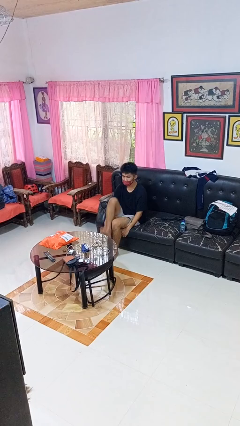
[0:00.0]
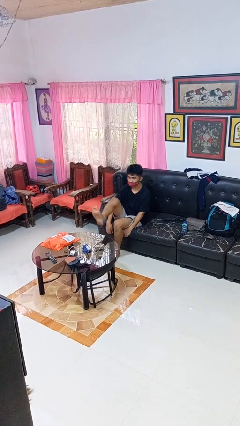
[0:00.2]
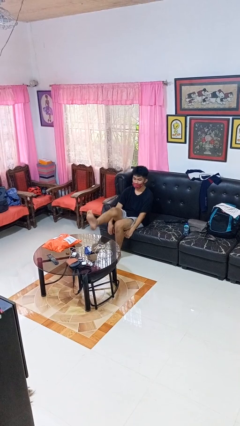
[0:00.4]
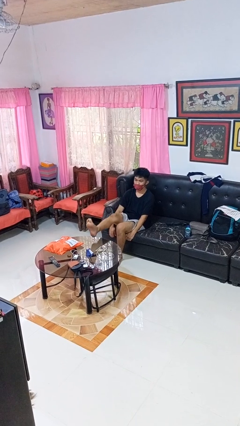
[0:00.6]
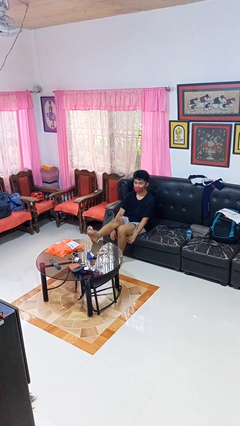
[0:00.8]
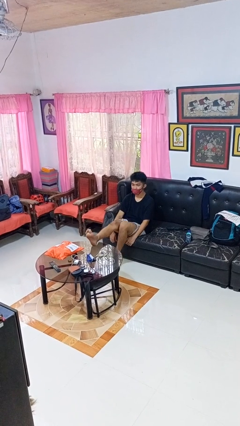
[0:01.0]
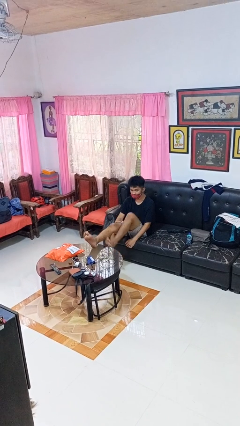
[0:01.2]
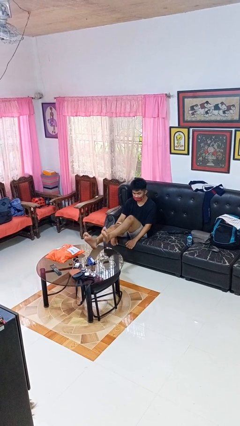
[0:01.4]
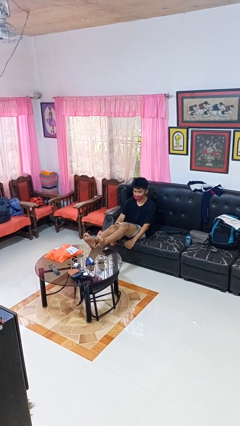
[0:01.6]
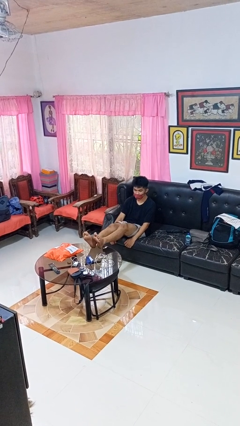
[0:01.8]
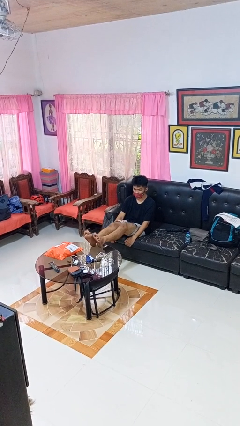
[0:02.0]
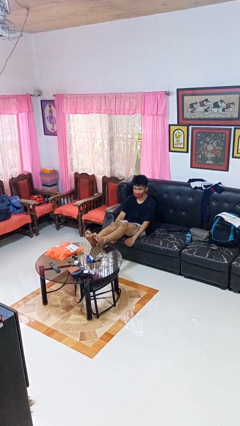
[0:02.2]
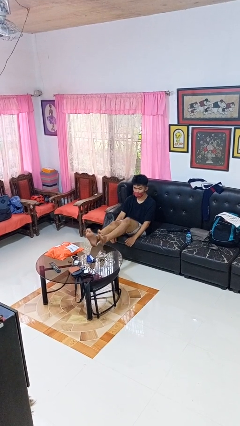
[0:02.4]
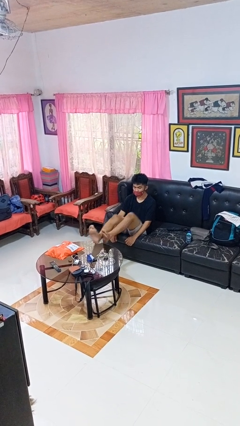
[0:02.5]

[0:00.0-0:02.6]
person puts feet up

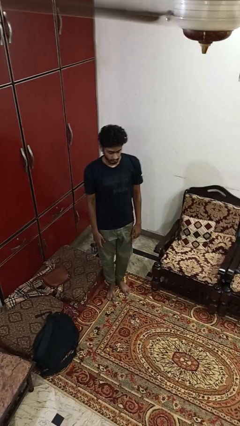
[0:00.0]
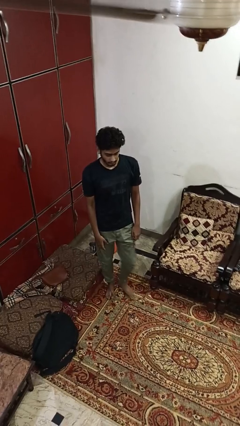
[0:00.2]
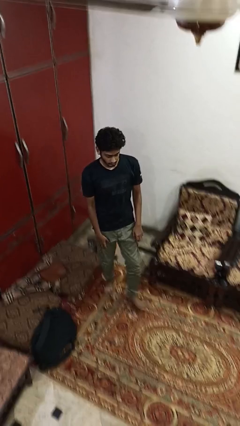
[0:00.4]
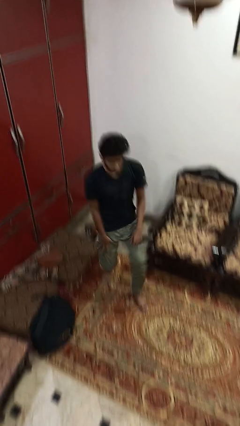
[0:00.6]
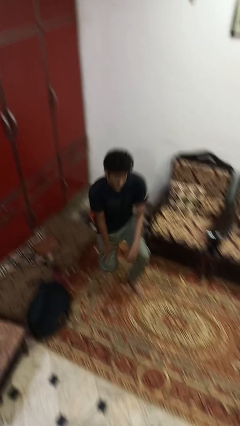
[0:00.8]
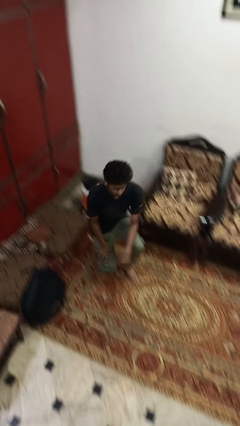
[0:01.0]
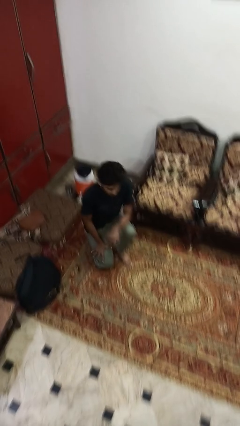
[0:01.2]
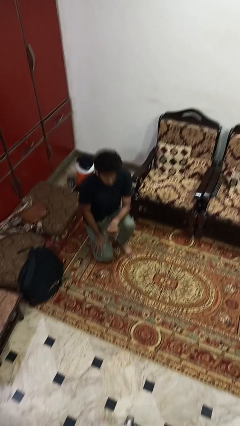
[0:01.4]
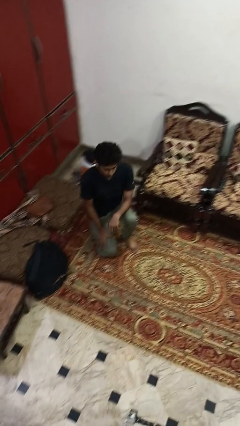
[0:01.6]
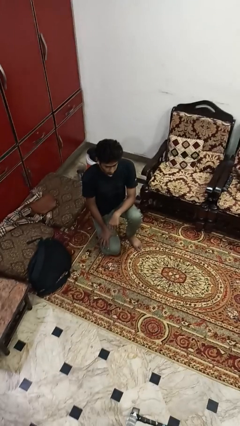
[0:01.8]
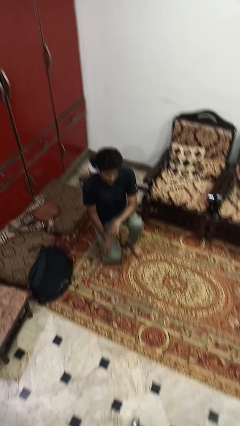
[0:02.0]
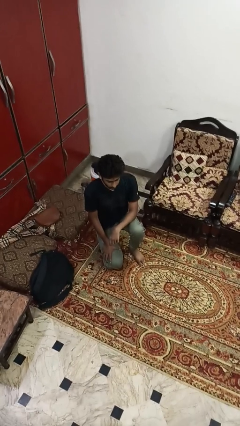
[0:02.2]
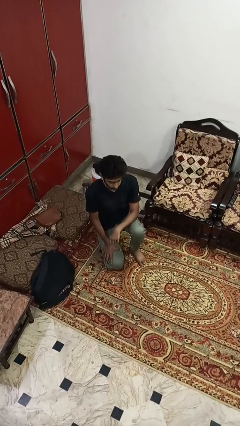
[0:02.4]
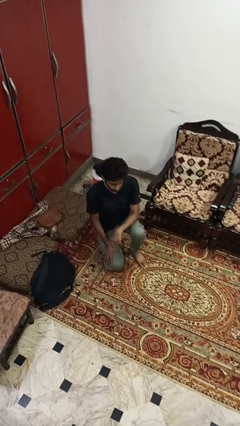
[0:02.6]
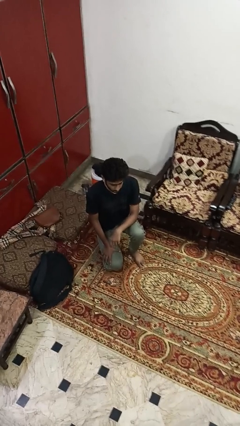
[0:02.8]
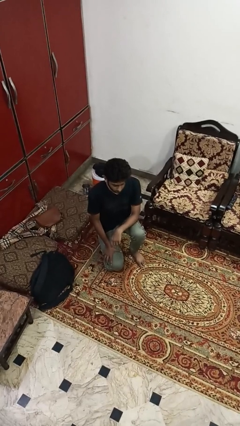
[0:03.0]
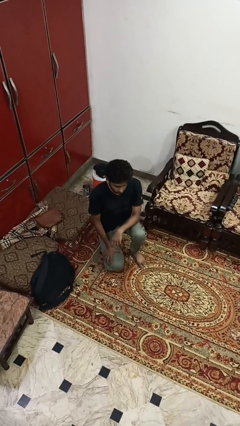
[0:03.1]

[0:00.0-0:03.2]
person kneels

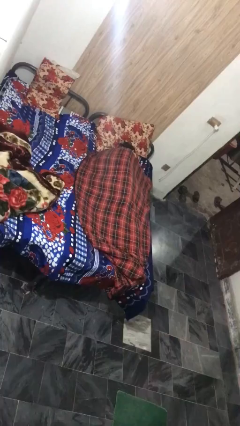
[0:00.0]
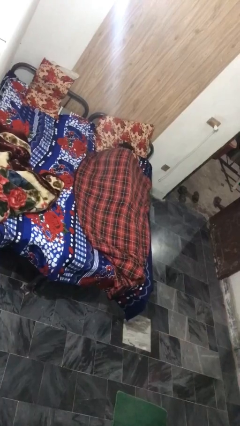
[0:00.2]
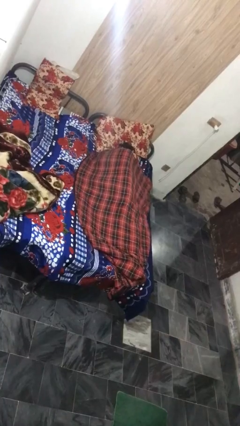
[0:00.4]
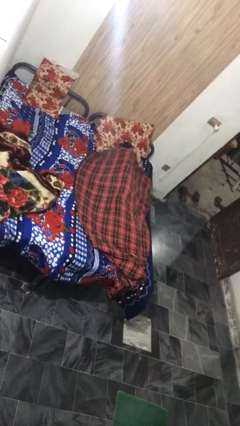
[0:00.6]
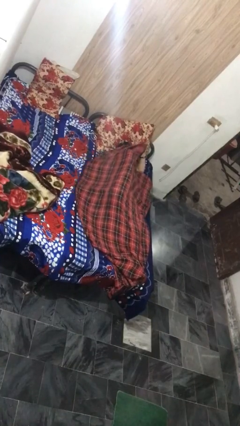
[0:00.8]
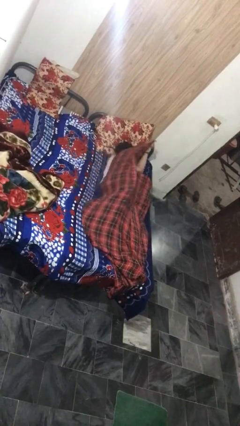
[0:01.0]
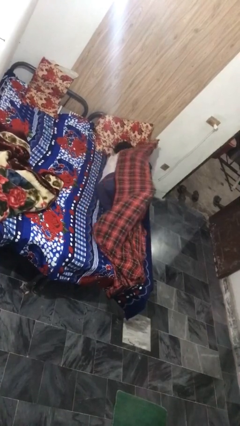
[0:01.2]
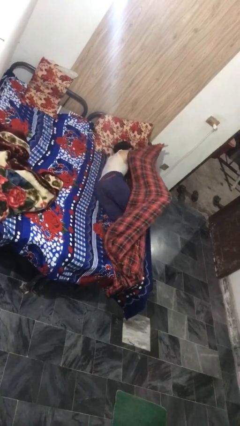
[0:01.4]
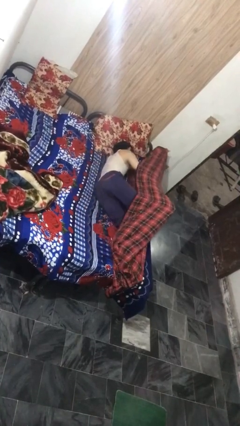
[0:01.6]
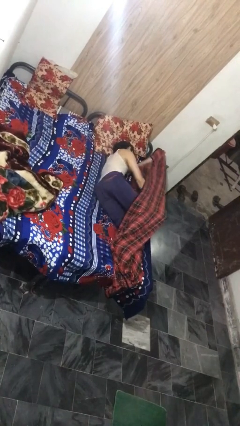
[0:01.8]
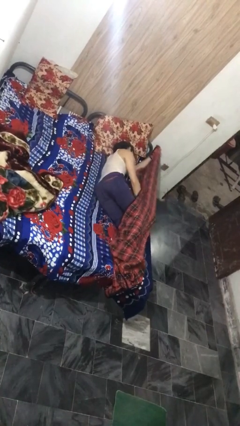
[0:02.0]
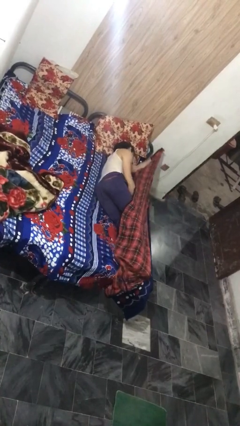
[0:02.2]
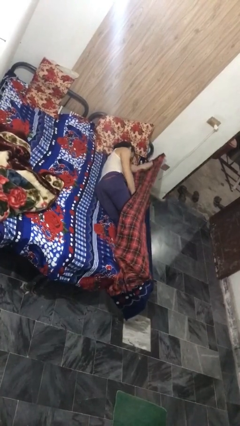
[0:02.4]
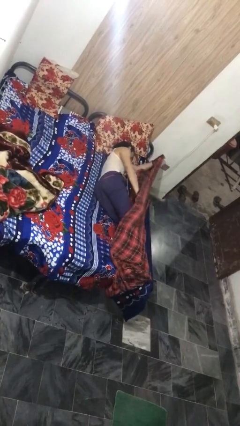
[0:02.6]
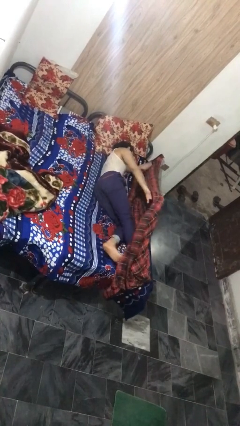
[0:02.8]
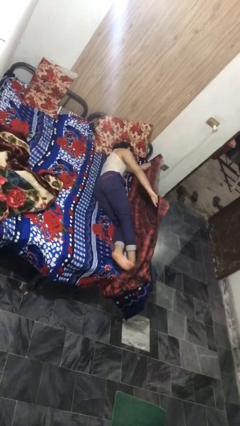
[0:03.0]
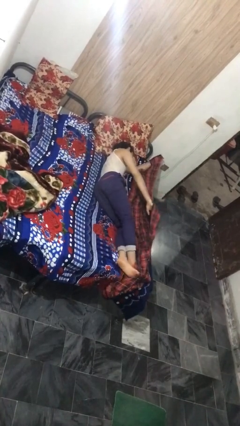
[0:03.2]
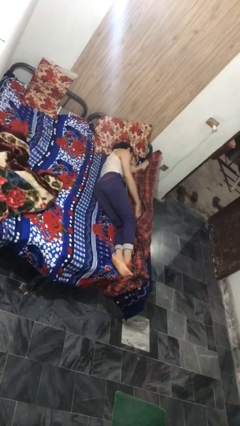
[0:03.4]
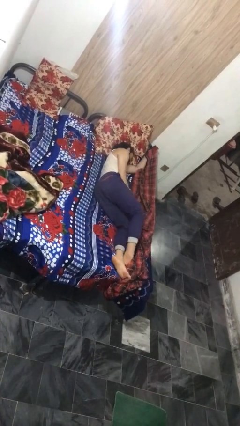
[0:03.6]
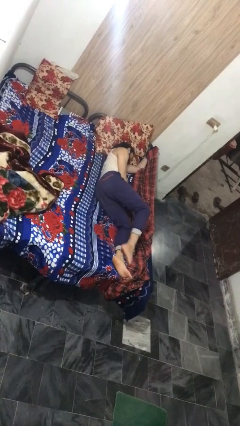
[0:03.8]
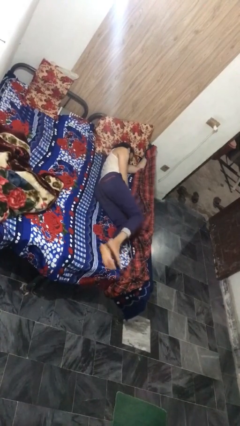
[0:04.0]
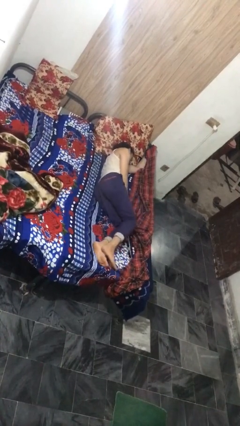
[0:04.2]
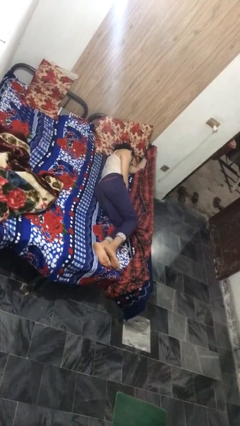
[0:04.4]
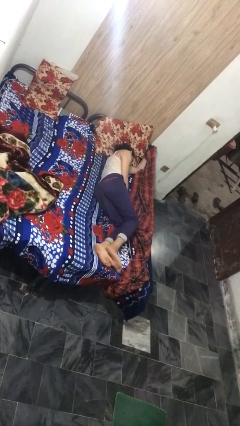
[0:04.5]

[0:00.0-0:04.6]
person uncovers with bedsheets

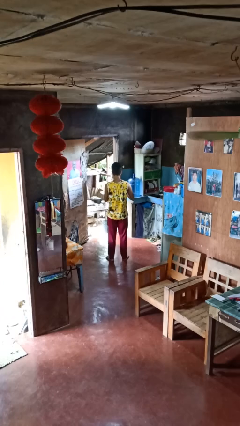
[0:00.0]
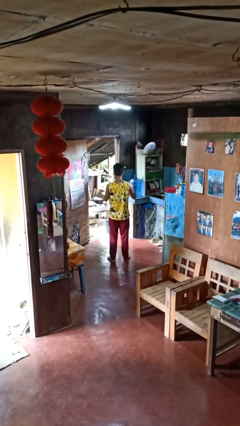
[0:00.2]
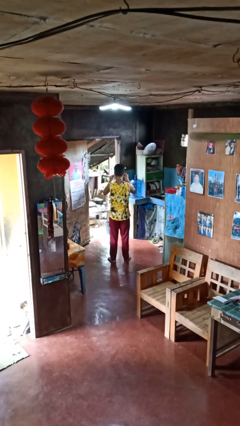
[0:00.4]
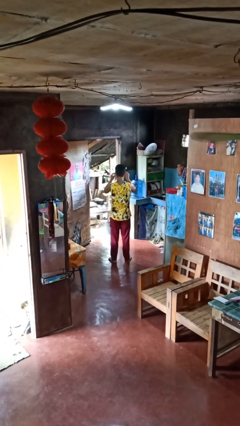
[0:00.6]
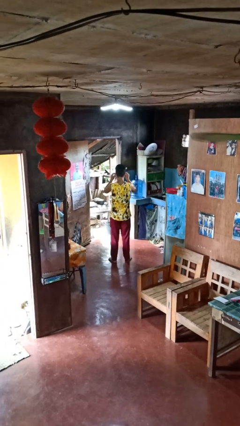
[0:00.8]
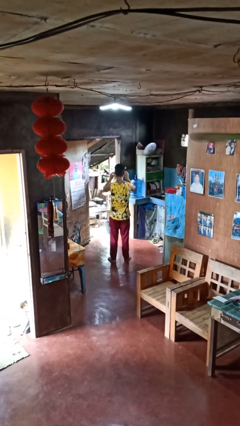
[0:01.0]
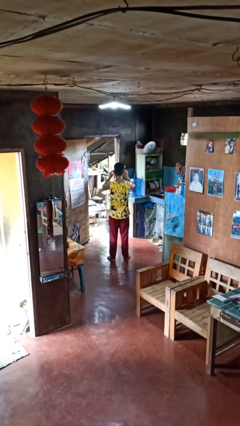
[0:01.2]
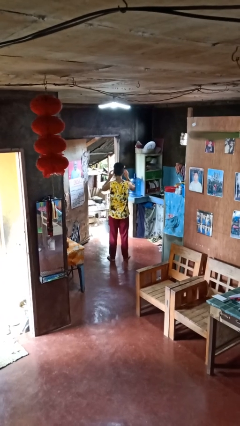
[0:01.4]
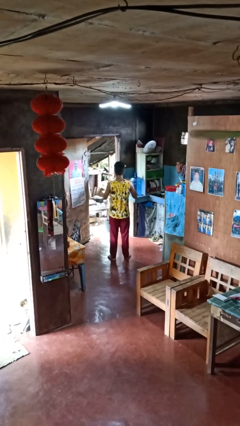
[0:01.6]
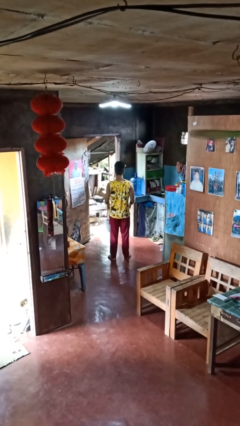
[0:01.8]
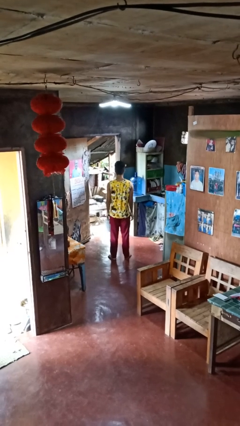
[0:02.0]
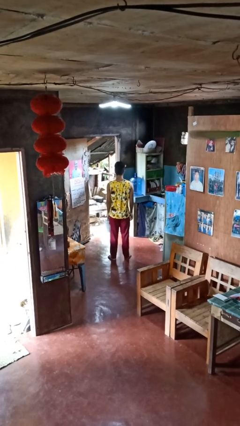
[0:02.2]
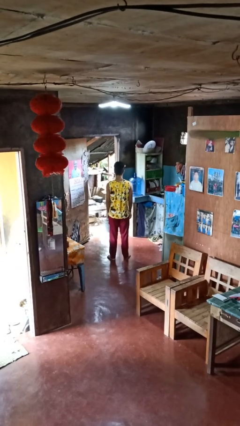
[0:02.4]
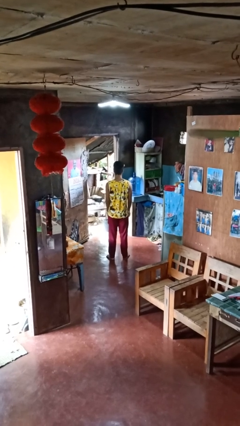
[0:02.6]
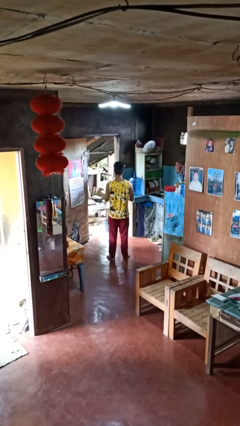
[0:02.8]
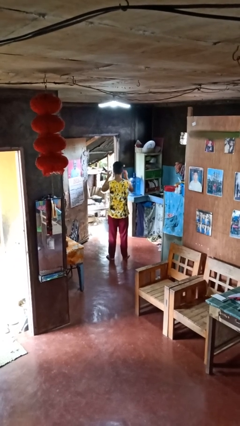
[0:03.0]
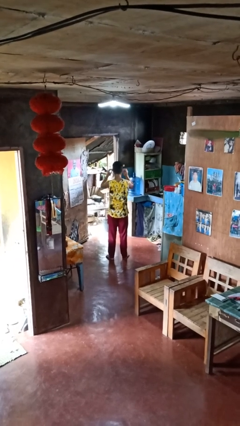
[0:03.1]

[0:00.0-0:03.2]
person puts on glasses

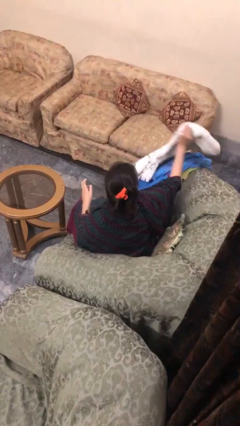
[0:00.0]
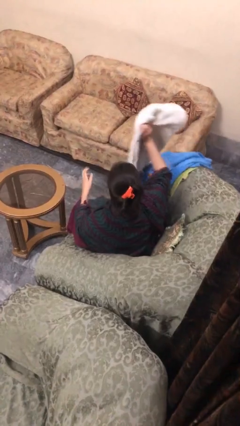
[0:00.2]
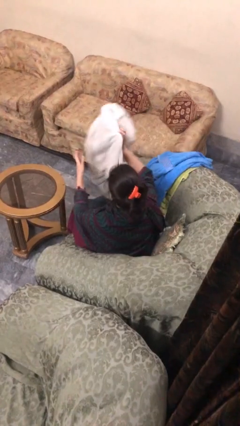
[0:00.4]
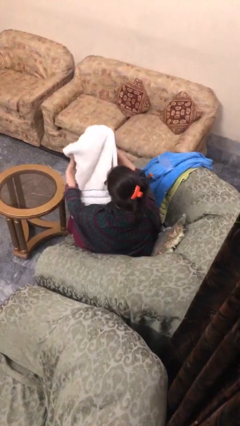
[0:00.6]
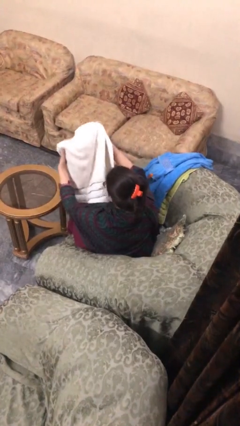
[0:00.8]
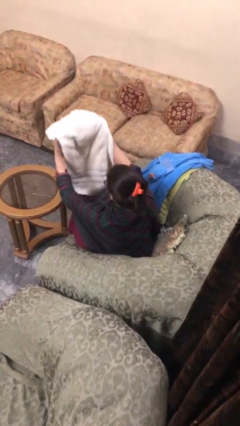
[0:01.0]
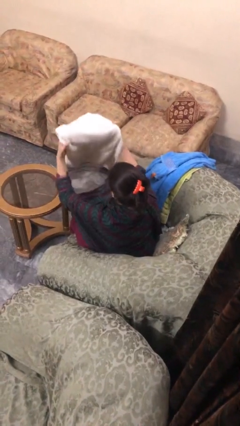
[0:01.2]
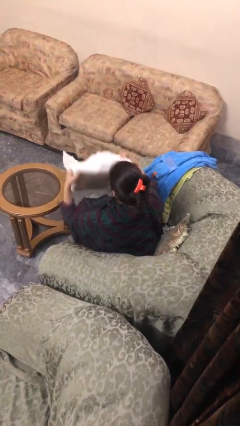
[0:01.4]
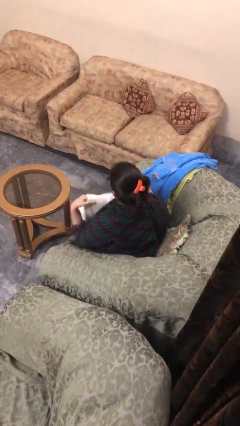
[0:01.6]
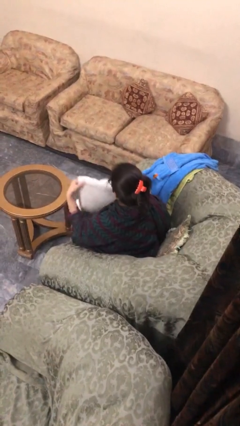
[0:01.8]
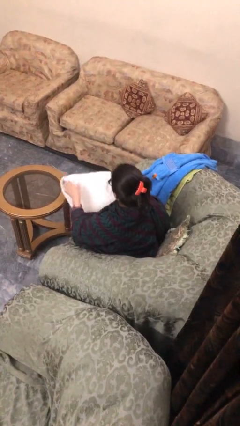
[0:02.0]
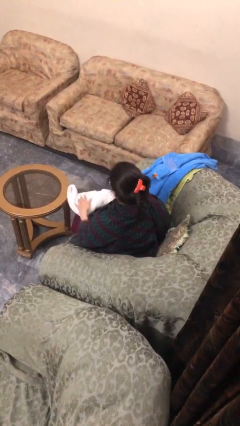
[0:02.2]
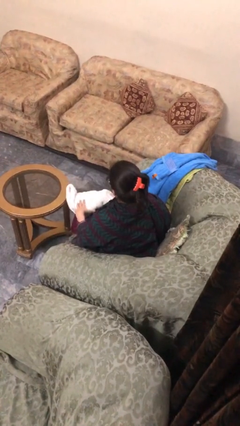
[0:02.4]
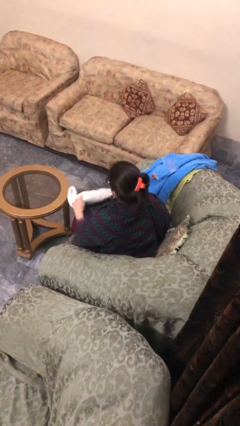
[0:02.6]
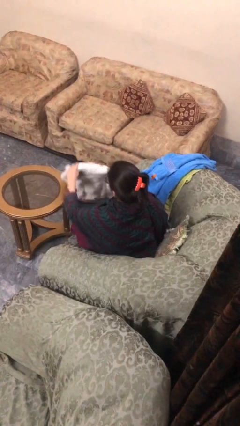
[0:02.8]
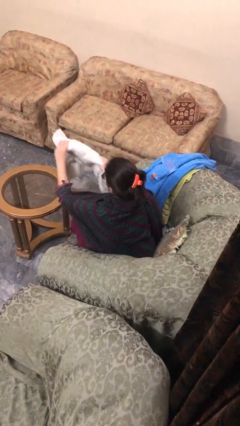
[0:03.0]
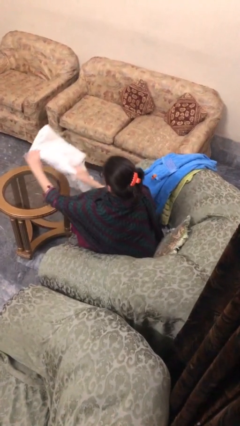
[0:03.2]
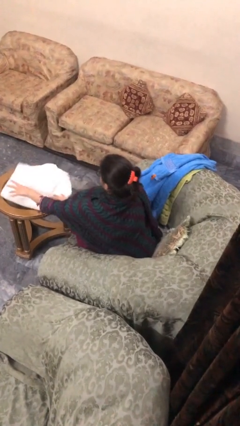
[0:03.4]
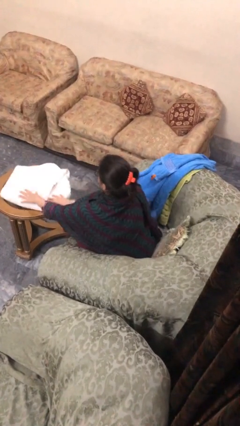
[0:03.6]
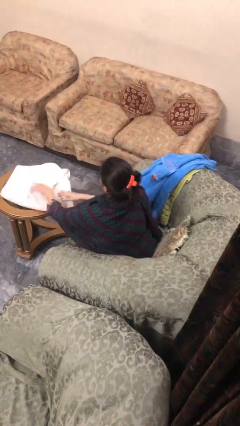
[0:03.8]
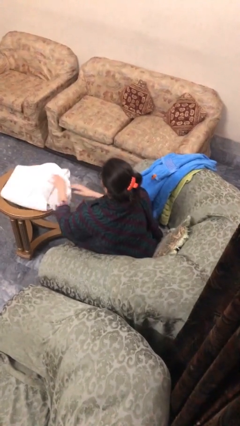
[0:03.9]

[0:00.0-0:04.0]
person folds towel

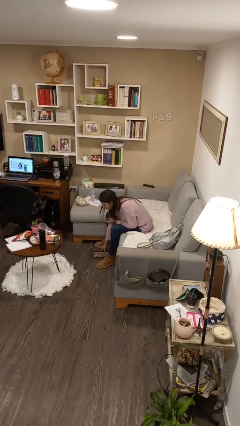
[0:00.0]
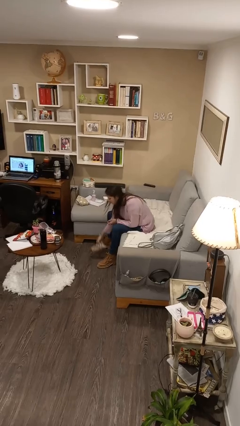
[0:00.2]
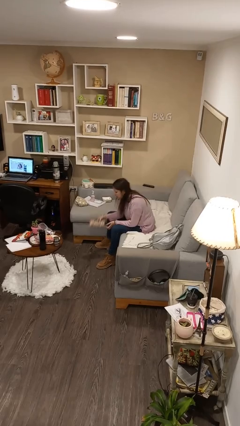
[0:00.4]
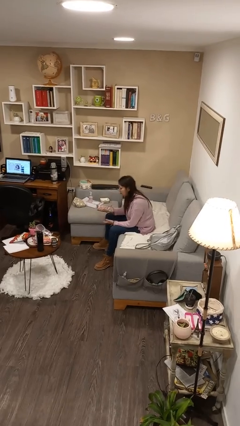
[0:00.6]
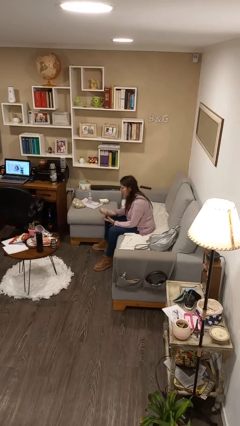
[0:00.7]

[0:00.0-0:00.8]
person picks up object from floor
